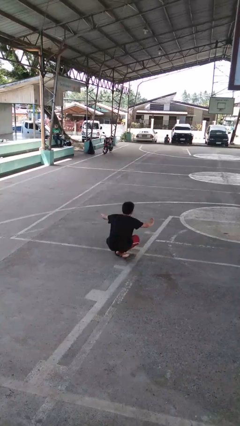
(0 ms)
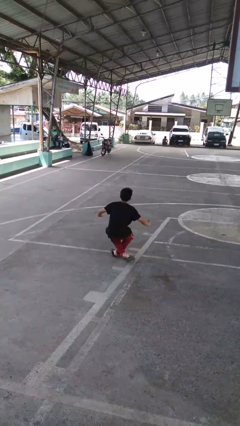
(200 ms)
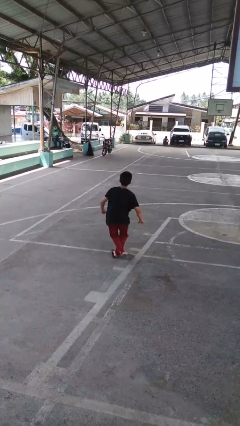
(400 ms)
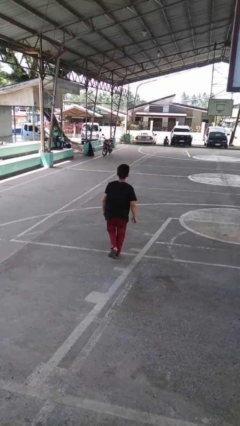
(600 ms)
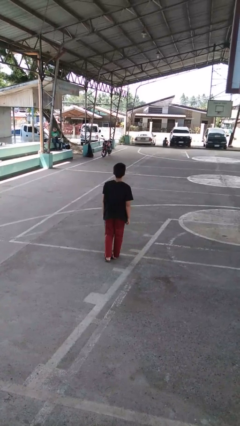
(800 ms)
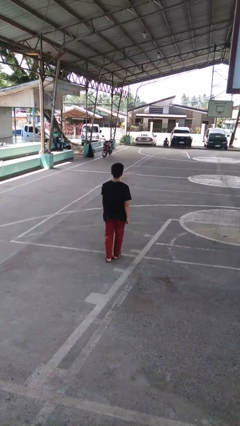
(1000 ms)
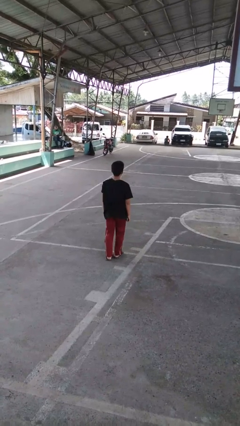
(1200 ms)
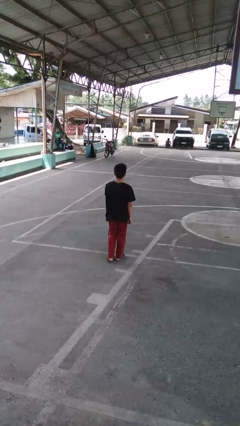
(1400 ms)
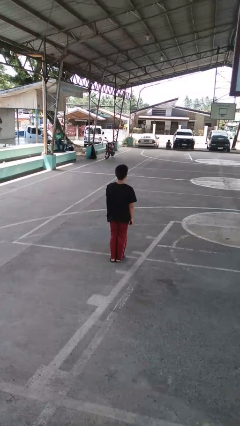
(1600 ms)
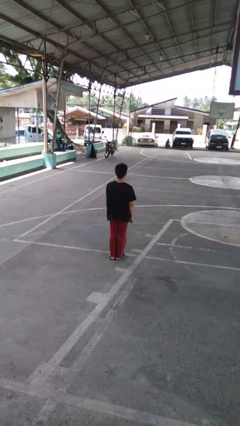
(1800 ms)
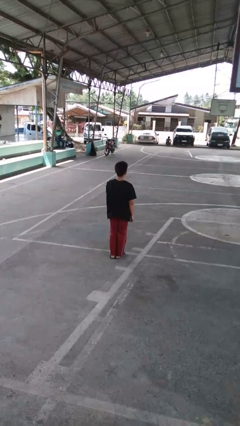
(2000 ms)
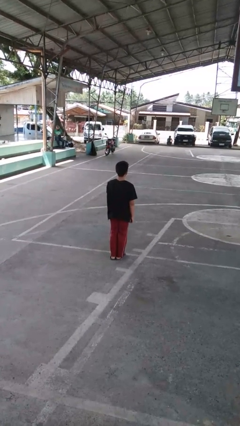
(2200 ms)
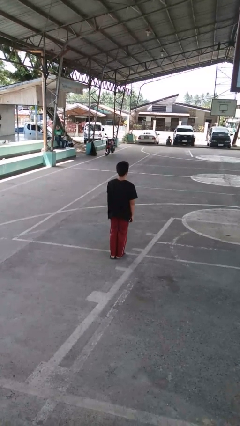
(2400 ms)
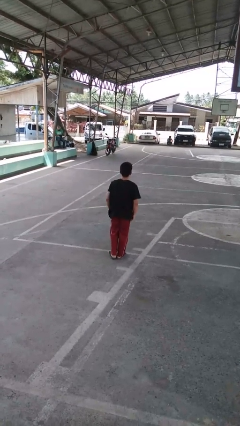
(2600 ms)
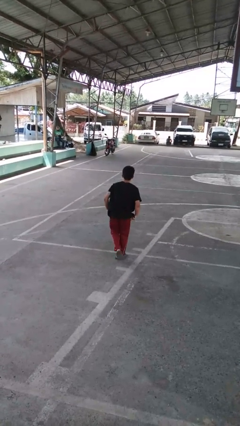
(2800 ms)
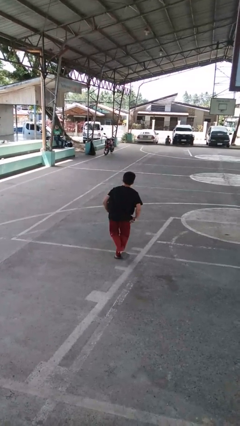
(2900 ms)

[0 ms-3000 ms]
person stands up from floor

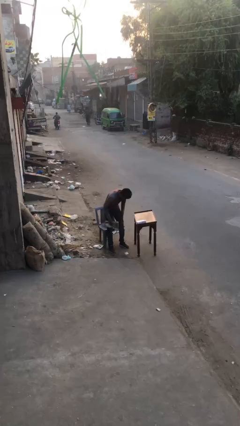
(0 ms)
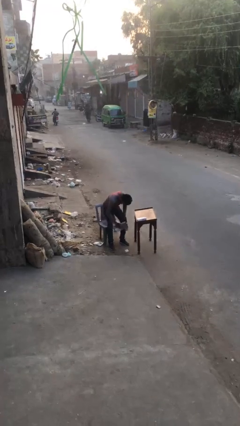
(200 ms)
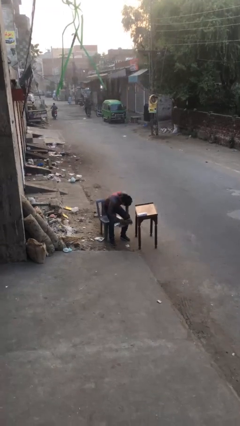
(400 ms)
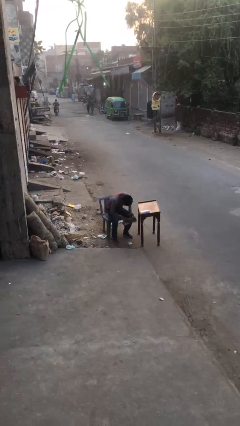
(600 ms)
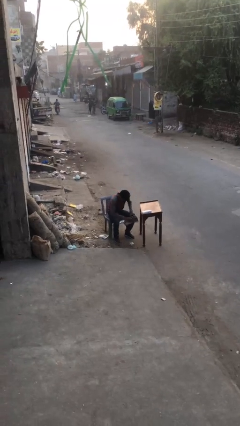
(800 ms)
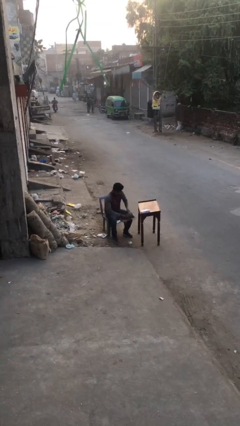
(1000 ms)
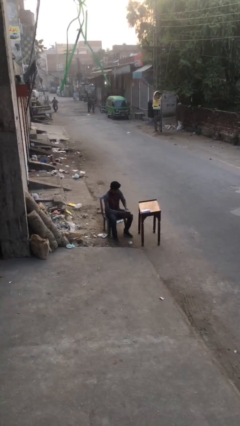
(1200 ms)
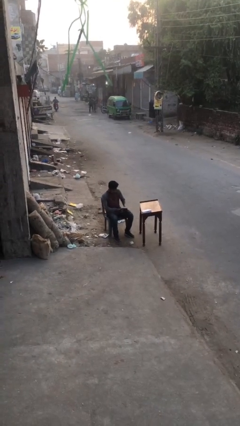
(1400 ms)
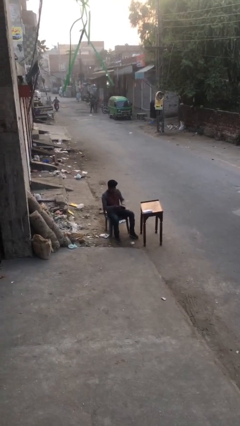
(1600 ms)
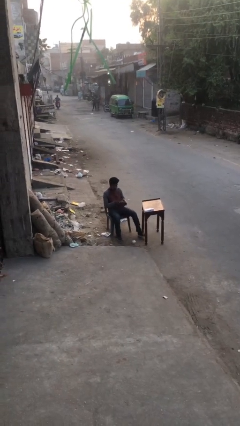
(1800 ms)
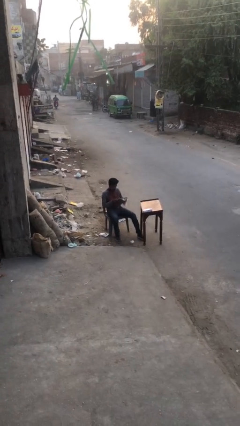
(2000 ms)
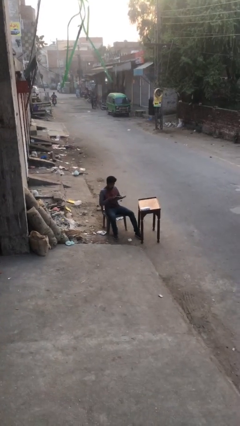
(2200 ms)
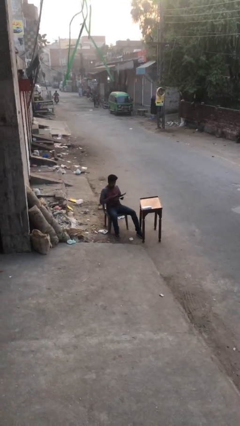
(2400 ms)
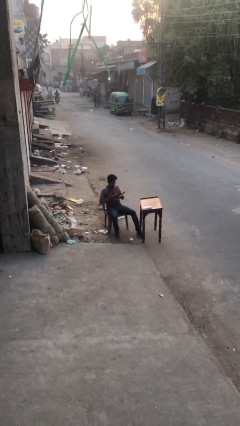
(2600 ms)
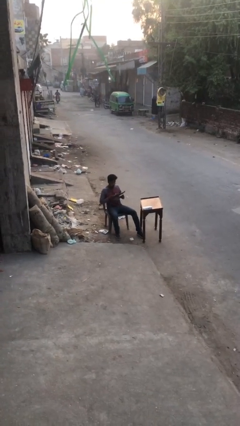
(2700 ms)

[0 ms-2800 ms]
person sits down

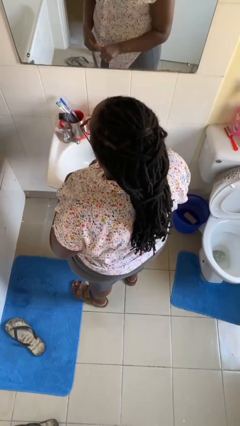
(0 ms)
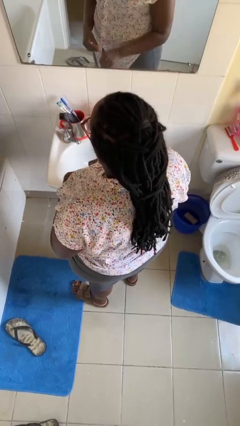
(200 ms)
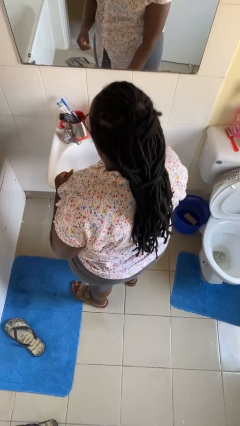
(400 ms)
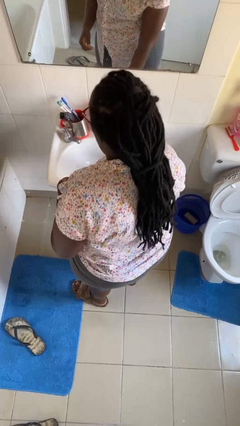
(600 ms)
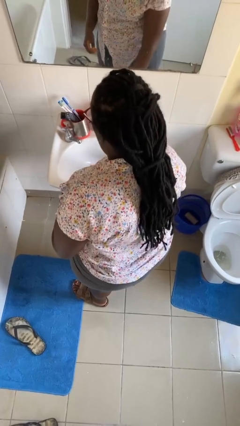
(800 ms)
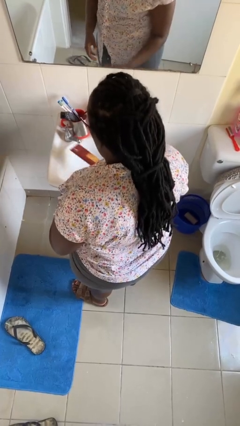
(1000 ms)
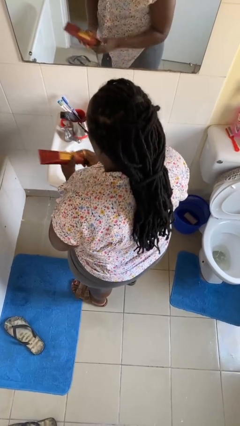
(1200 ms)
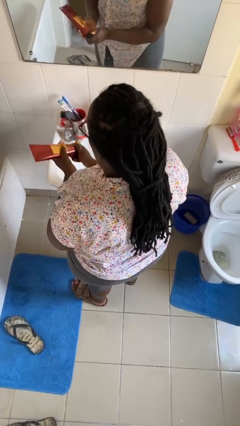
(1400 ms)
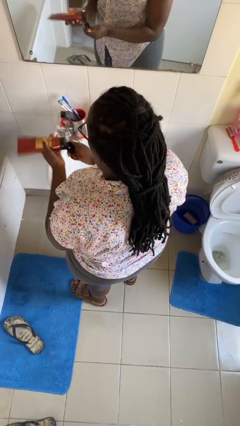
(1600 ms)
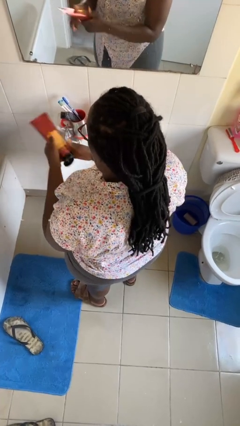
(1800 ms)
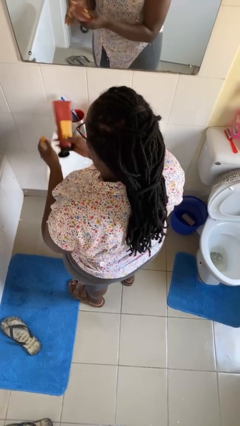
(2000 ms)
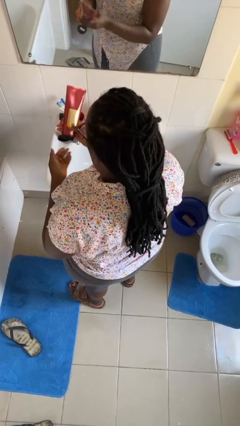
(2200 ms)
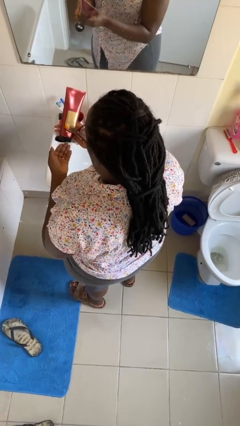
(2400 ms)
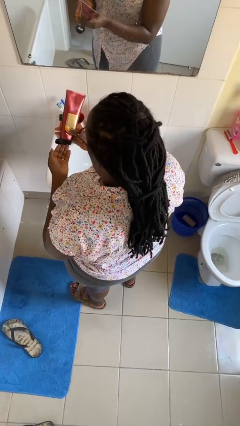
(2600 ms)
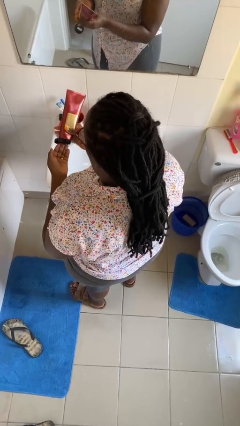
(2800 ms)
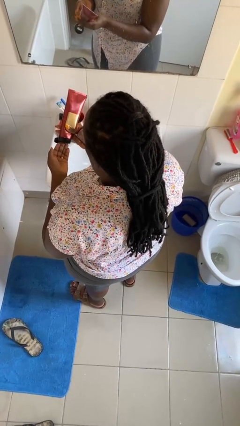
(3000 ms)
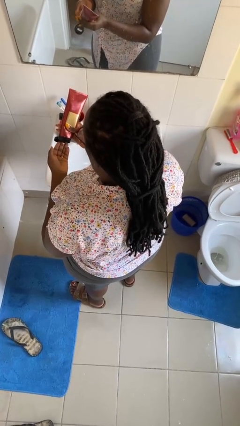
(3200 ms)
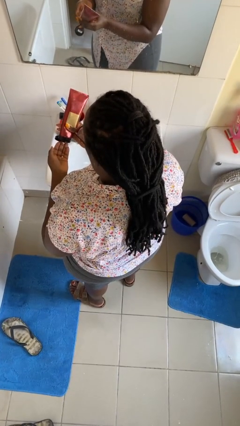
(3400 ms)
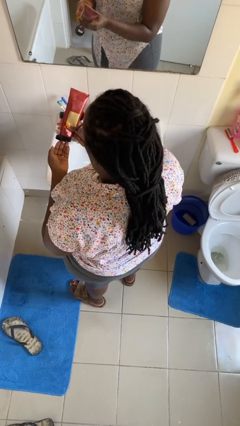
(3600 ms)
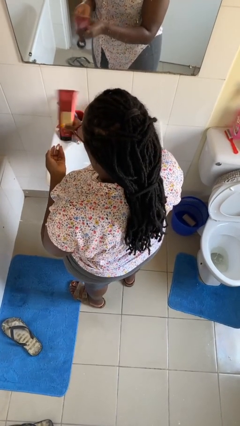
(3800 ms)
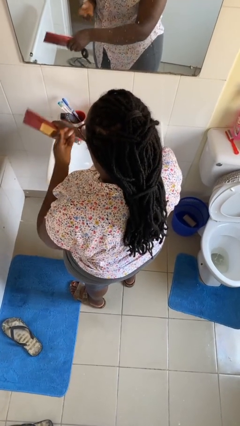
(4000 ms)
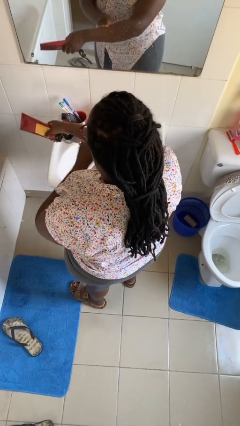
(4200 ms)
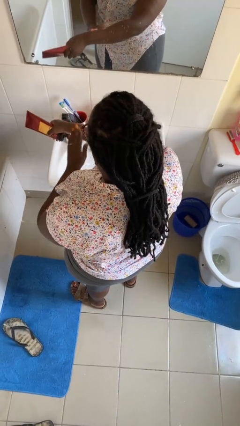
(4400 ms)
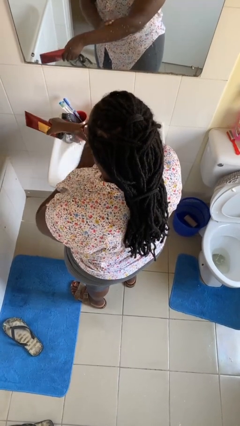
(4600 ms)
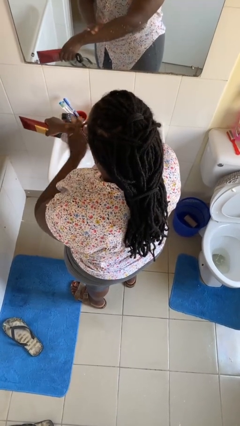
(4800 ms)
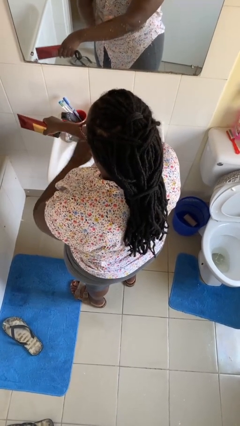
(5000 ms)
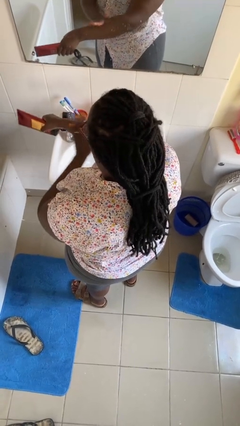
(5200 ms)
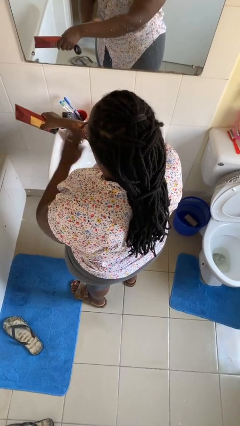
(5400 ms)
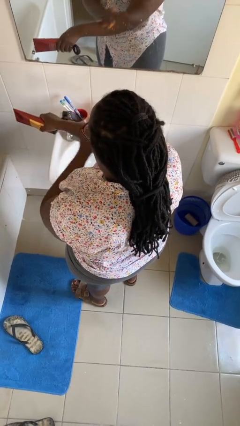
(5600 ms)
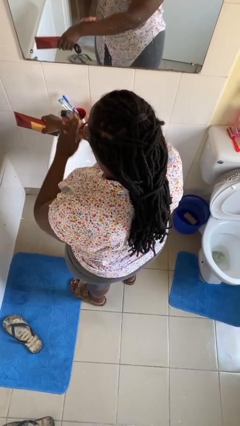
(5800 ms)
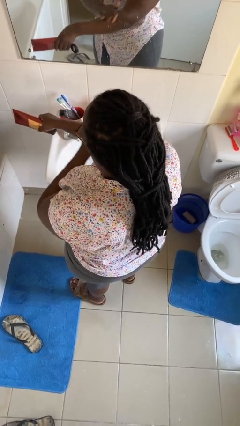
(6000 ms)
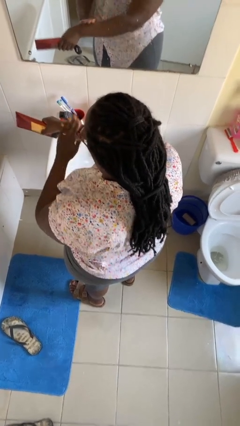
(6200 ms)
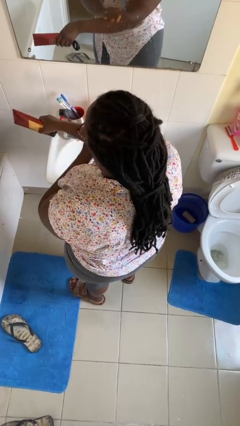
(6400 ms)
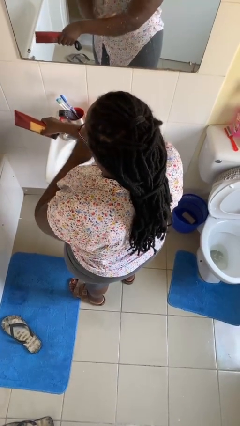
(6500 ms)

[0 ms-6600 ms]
person applies sunscreen

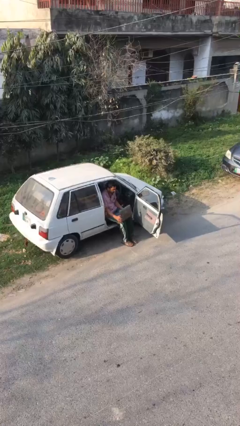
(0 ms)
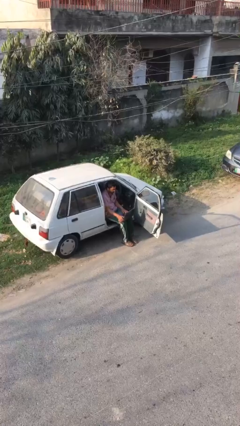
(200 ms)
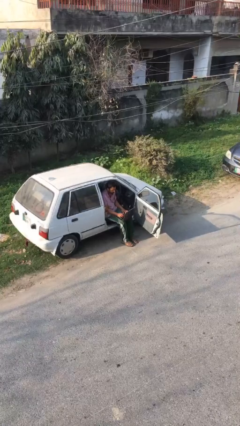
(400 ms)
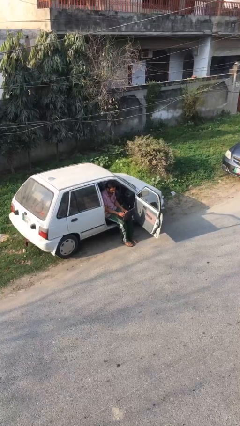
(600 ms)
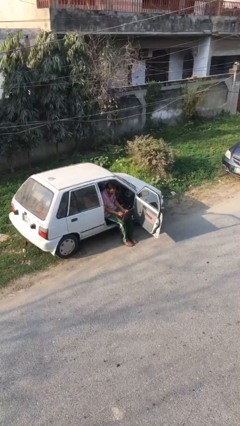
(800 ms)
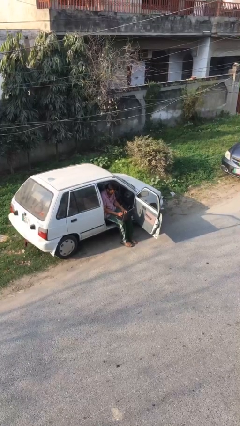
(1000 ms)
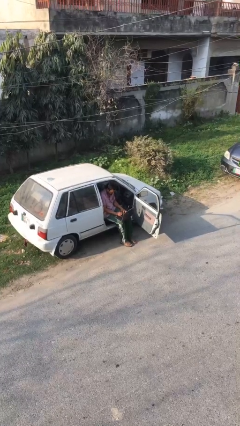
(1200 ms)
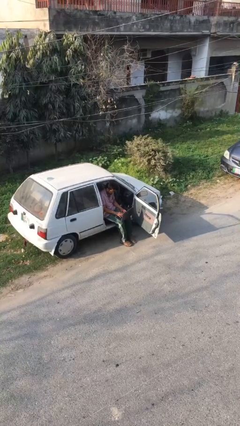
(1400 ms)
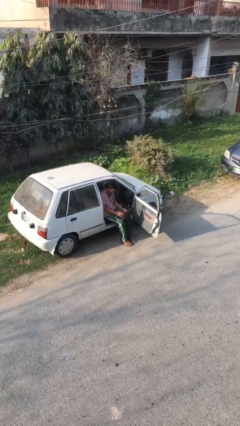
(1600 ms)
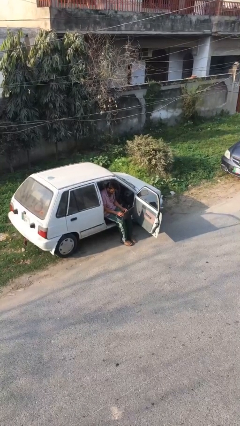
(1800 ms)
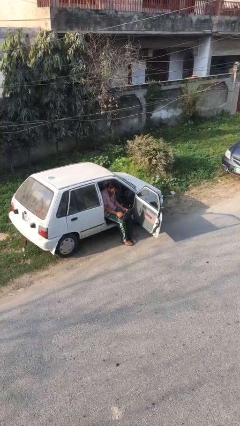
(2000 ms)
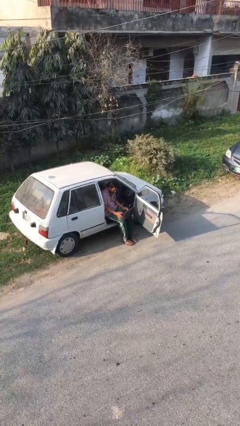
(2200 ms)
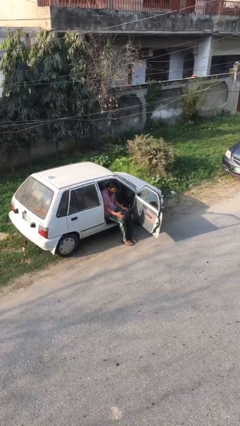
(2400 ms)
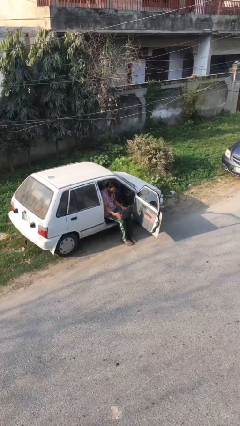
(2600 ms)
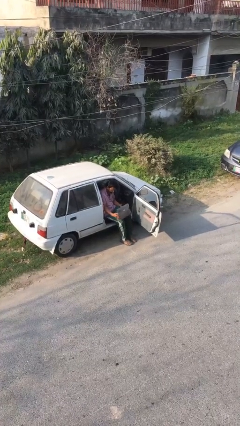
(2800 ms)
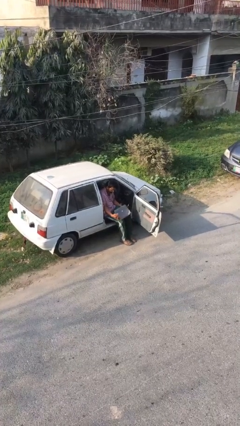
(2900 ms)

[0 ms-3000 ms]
person interacts with laptop

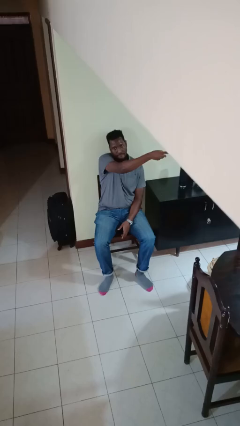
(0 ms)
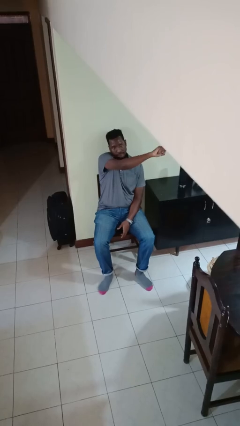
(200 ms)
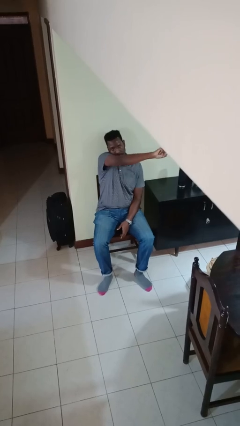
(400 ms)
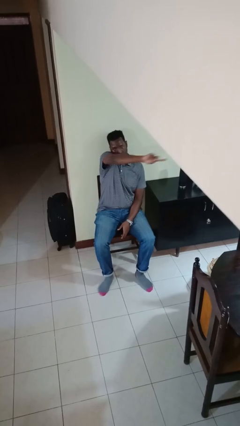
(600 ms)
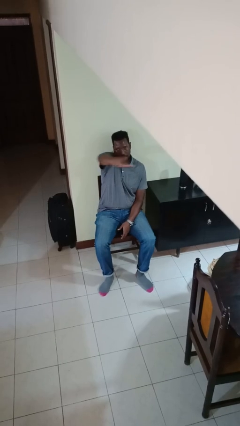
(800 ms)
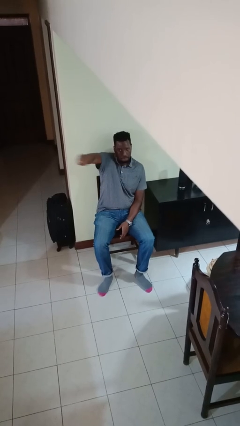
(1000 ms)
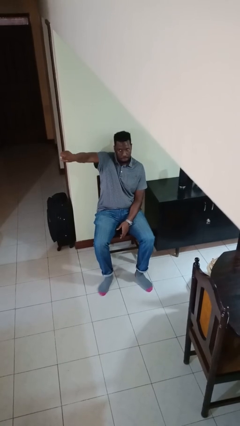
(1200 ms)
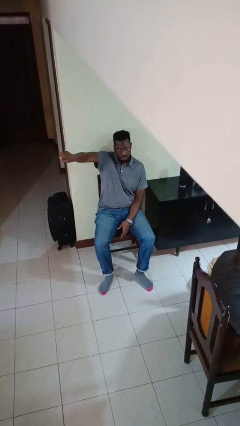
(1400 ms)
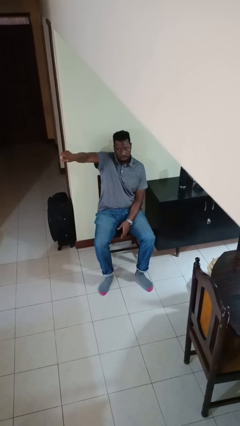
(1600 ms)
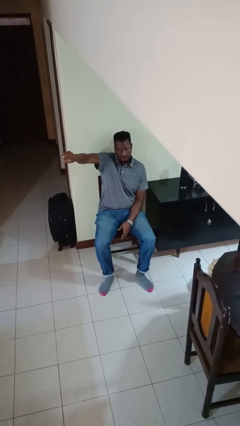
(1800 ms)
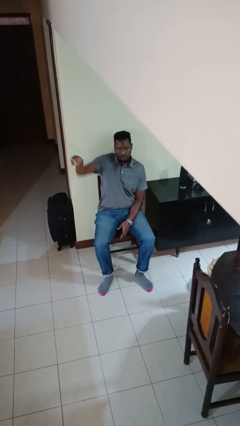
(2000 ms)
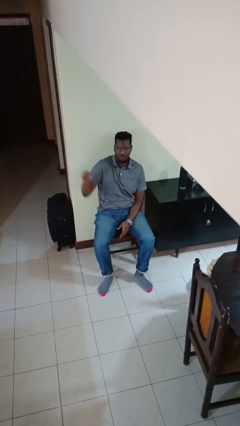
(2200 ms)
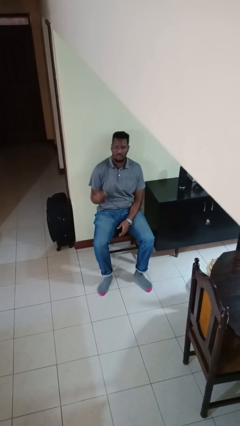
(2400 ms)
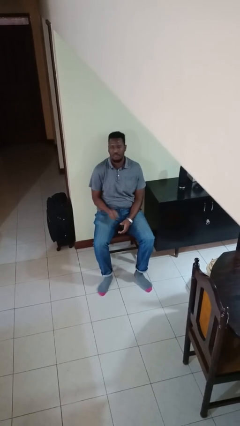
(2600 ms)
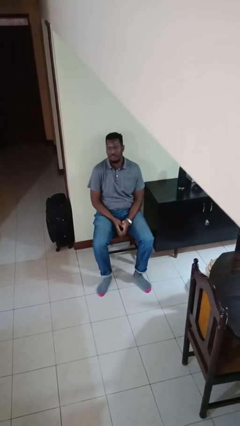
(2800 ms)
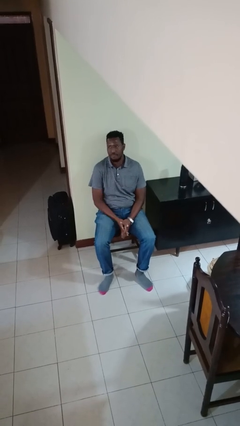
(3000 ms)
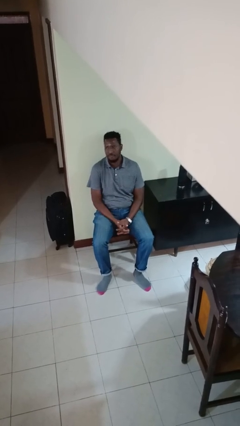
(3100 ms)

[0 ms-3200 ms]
person gestures swipe right
